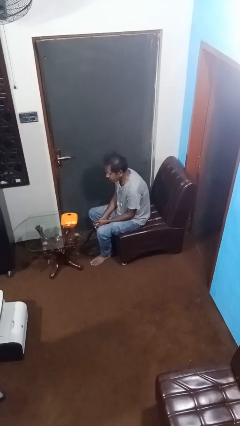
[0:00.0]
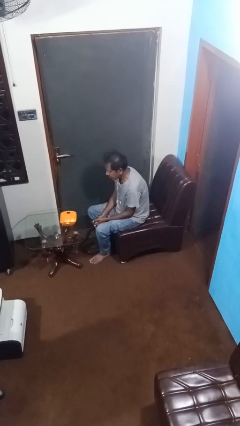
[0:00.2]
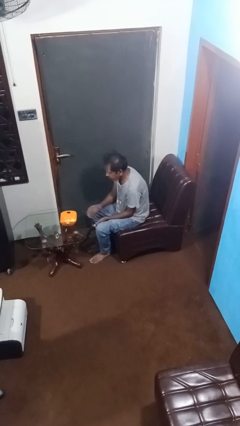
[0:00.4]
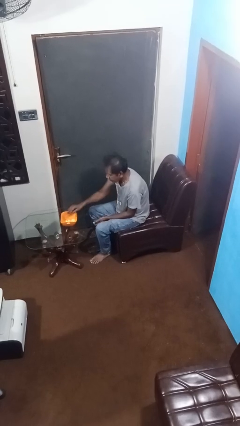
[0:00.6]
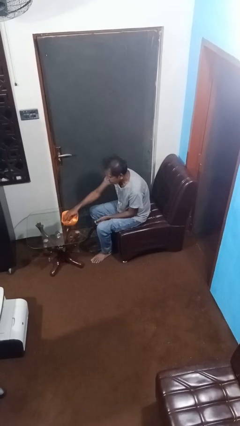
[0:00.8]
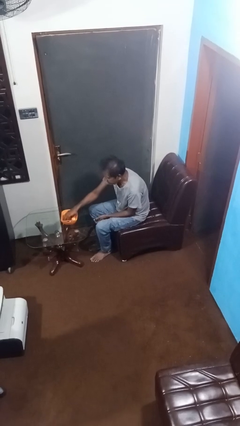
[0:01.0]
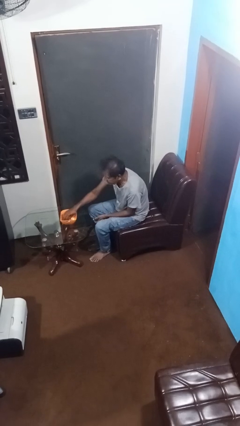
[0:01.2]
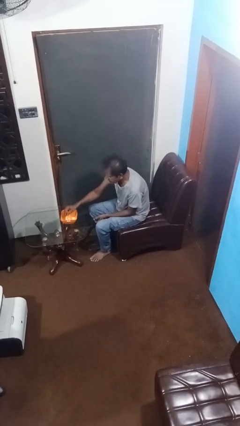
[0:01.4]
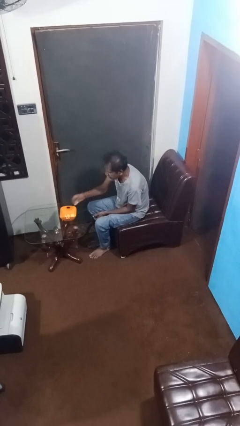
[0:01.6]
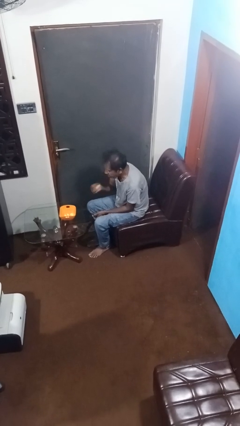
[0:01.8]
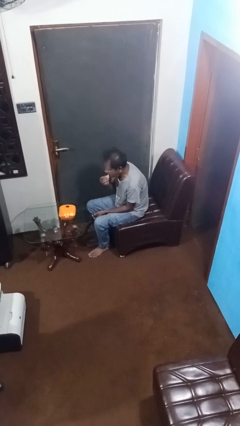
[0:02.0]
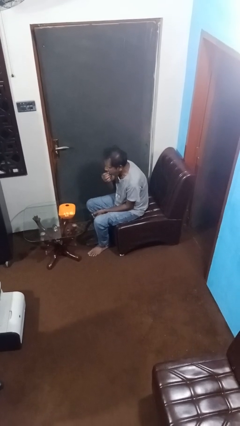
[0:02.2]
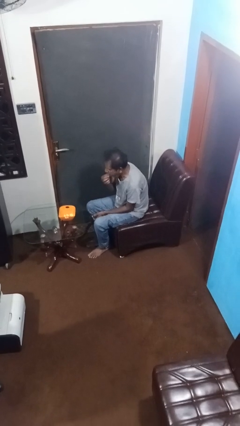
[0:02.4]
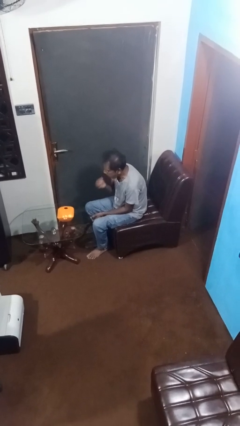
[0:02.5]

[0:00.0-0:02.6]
person eats with hands

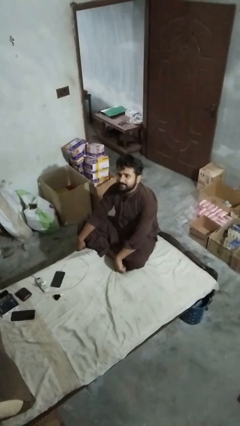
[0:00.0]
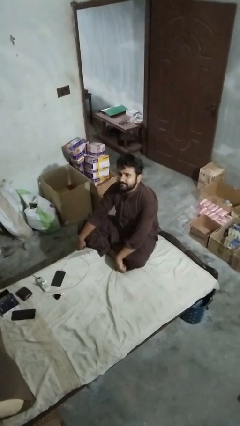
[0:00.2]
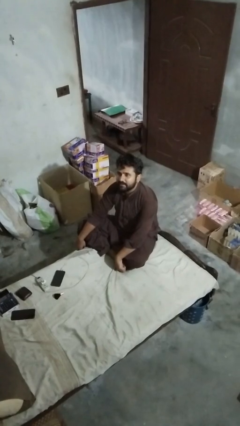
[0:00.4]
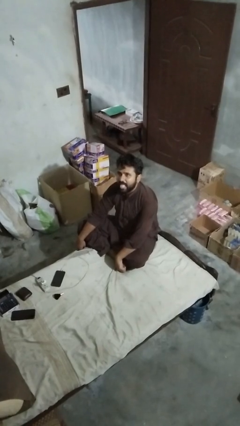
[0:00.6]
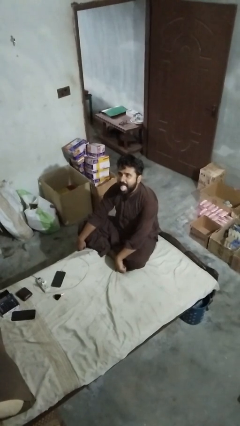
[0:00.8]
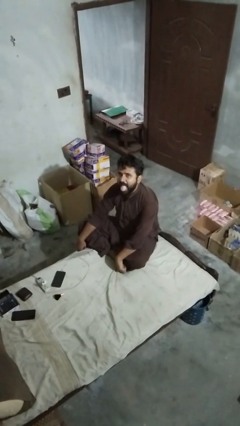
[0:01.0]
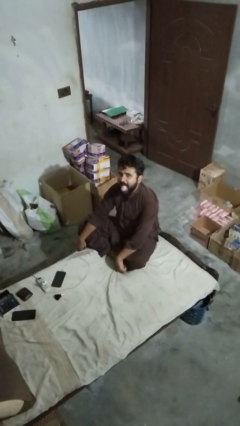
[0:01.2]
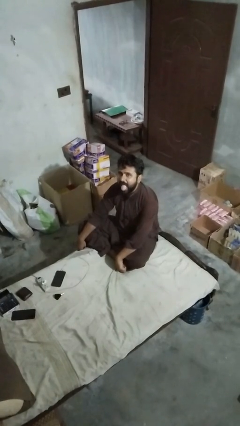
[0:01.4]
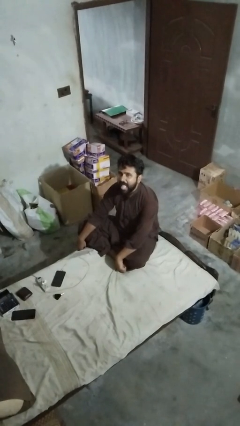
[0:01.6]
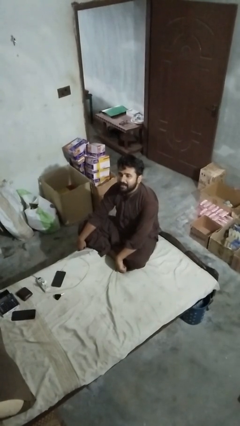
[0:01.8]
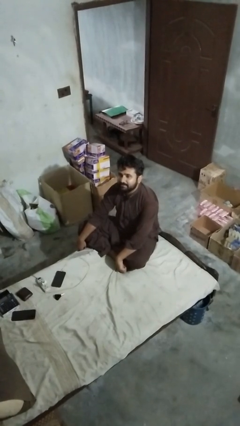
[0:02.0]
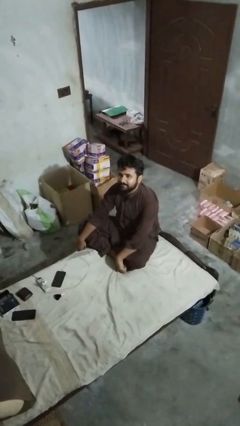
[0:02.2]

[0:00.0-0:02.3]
person sticks out tongue

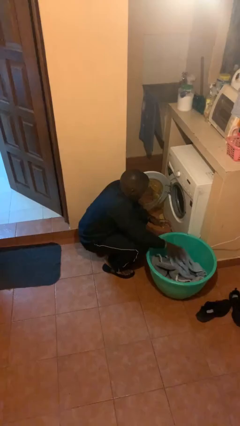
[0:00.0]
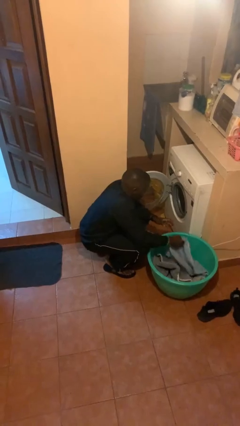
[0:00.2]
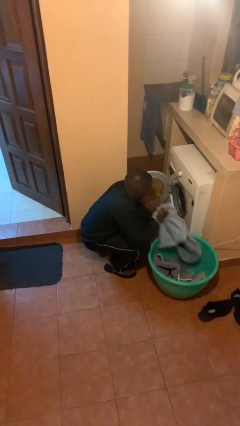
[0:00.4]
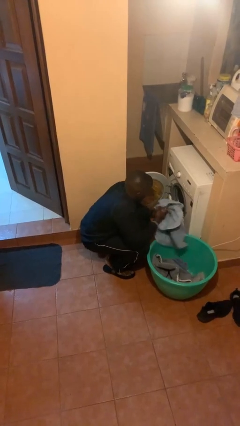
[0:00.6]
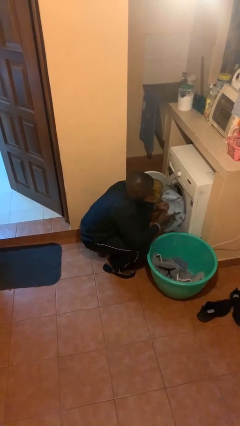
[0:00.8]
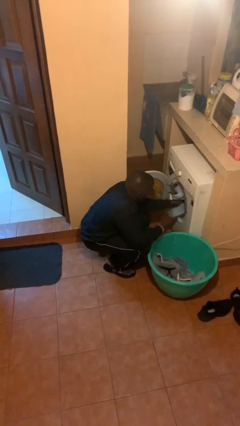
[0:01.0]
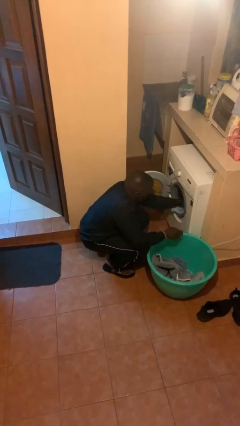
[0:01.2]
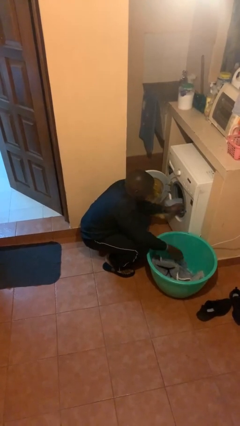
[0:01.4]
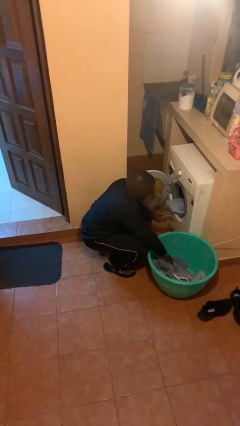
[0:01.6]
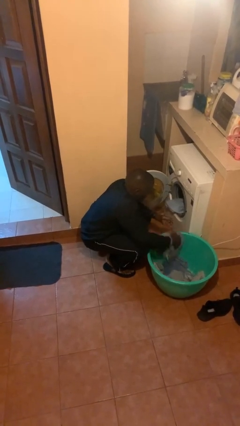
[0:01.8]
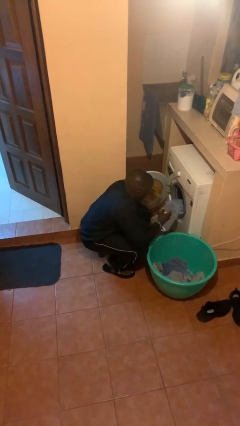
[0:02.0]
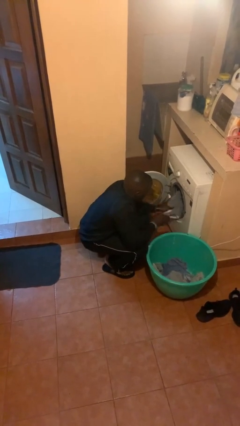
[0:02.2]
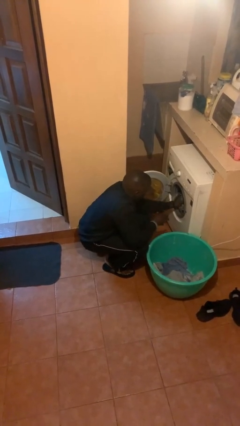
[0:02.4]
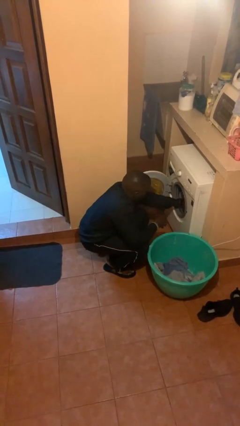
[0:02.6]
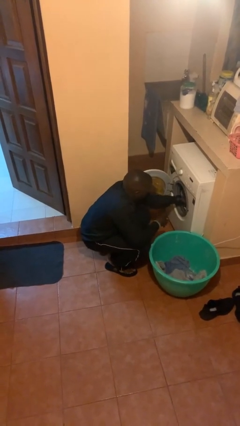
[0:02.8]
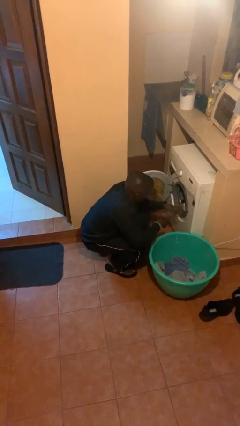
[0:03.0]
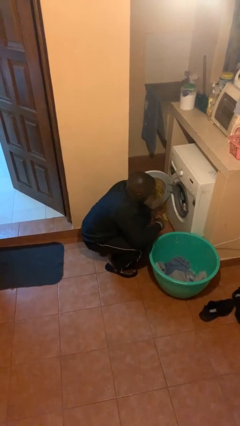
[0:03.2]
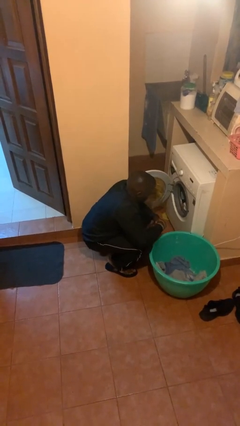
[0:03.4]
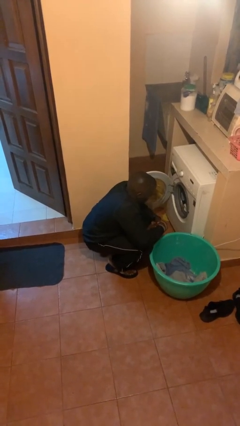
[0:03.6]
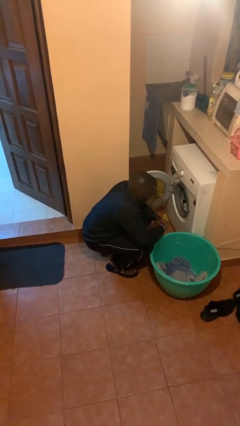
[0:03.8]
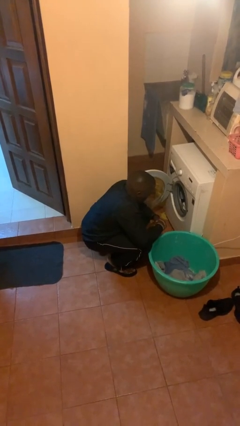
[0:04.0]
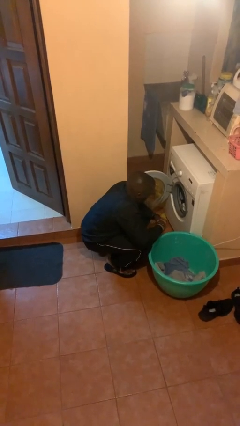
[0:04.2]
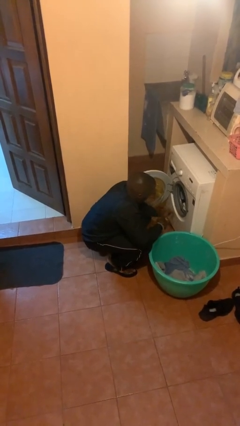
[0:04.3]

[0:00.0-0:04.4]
person loads clotheswasher

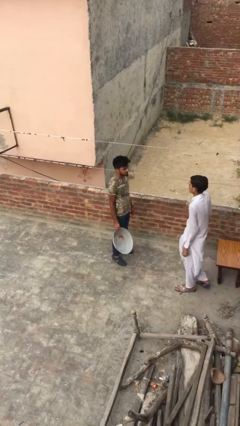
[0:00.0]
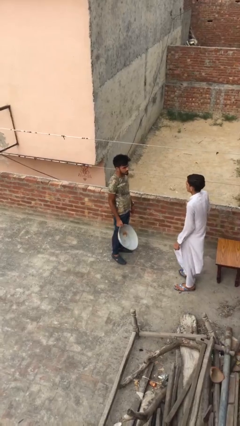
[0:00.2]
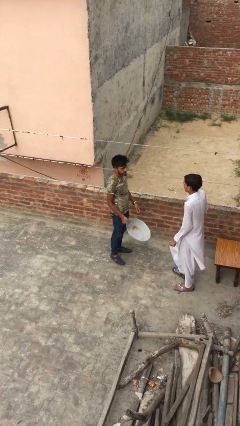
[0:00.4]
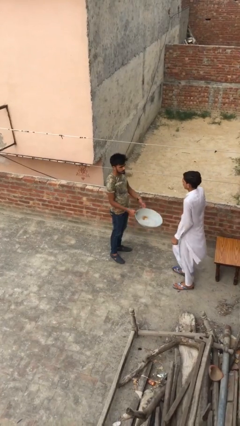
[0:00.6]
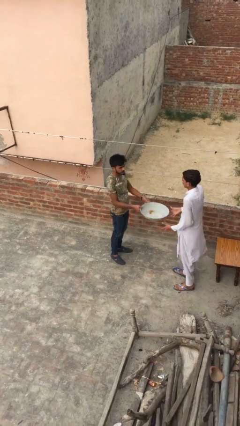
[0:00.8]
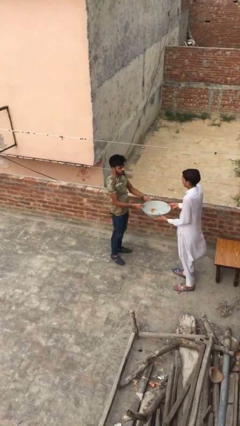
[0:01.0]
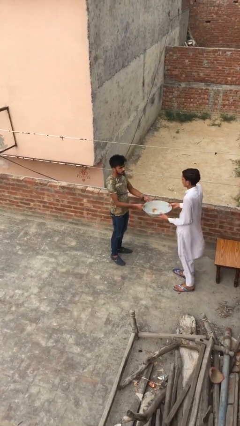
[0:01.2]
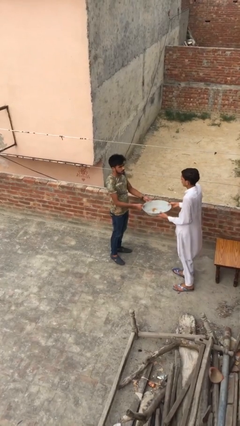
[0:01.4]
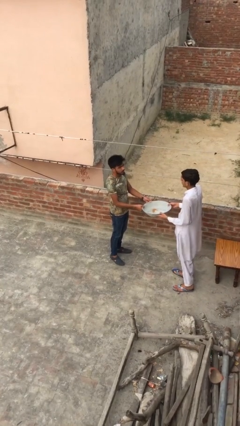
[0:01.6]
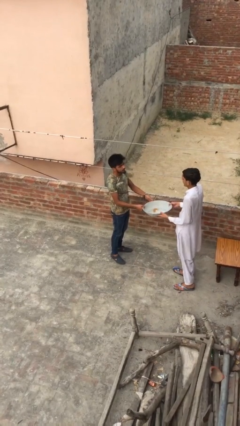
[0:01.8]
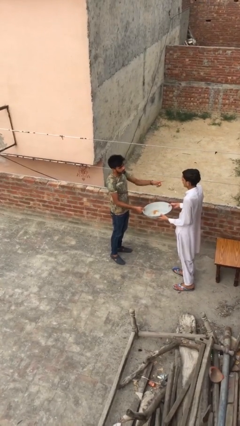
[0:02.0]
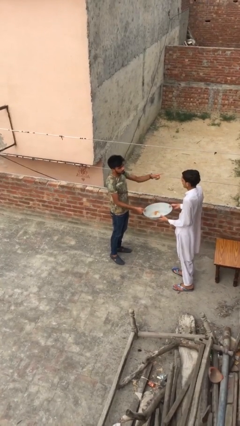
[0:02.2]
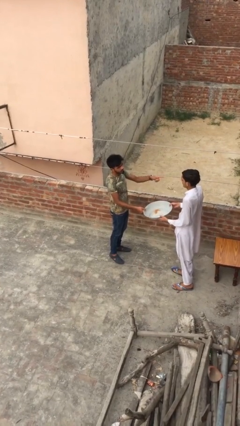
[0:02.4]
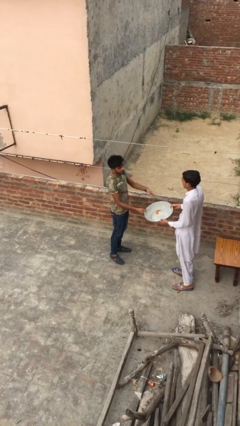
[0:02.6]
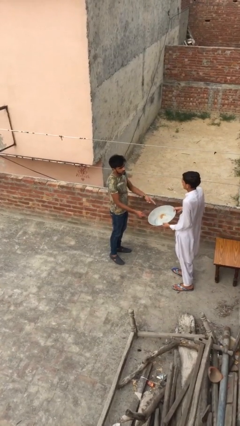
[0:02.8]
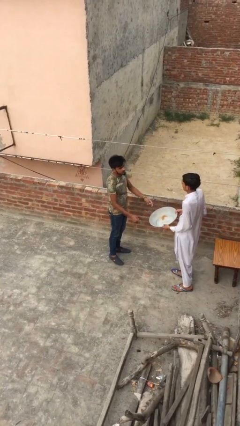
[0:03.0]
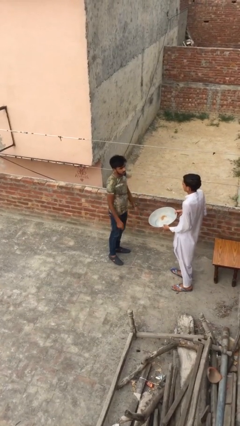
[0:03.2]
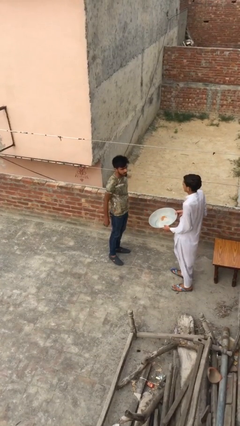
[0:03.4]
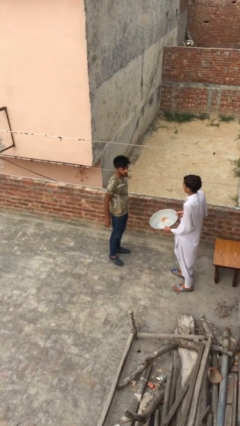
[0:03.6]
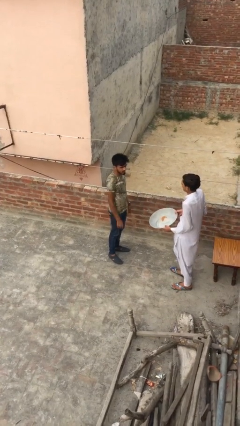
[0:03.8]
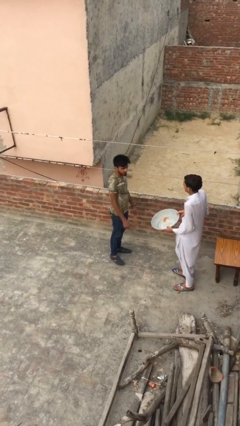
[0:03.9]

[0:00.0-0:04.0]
person transfers object to person

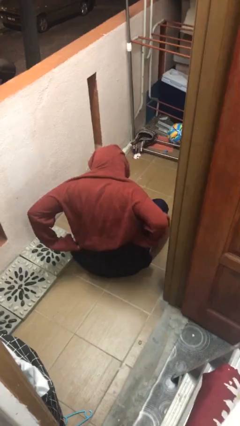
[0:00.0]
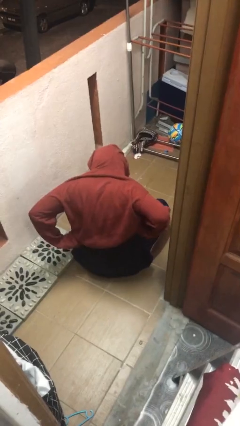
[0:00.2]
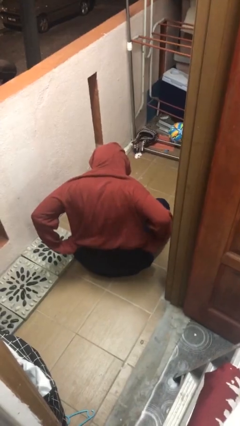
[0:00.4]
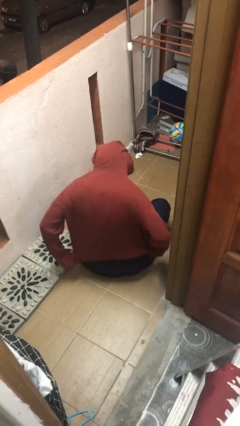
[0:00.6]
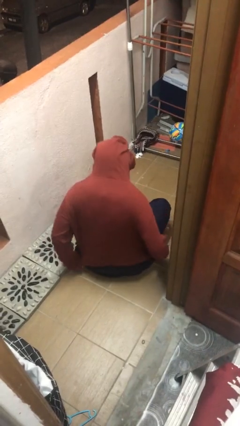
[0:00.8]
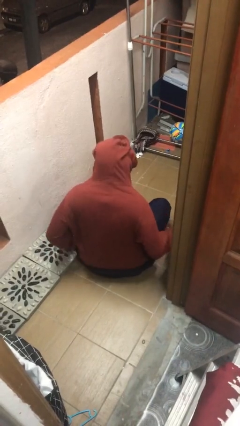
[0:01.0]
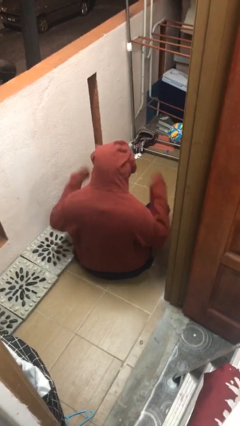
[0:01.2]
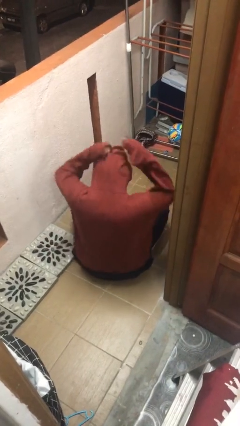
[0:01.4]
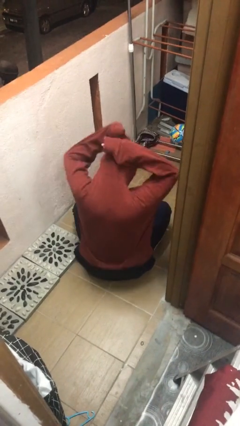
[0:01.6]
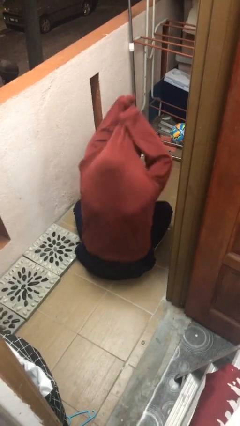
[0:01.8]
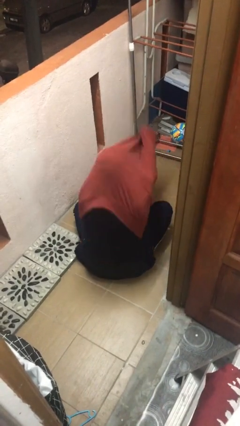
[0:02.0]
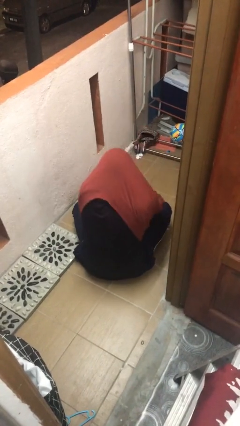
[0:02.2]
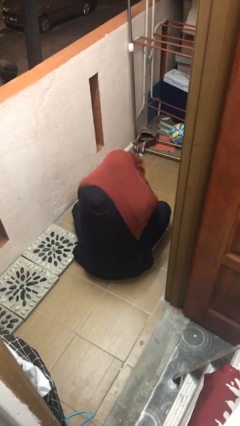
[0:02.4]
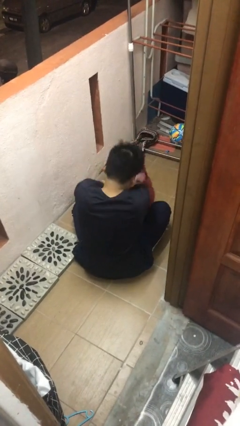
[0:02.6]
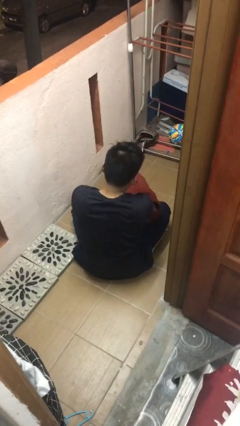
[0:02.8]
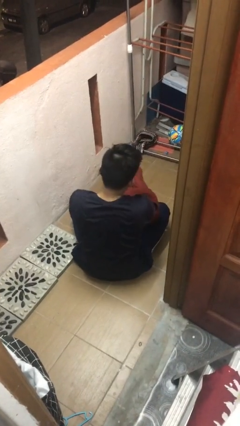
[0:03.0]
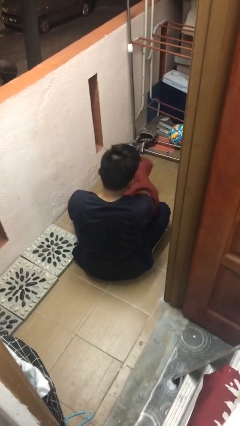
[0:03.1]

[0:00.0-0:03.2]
person takes off hoodie

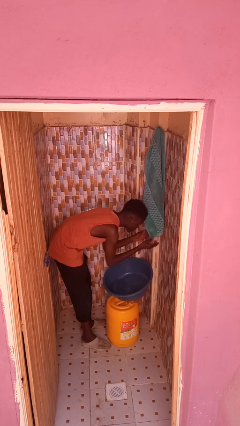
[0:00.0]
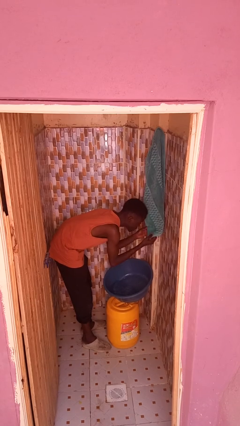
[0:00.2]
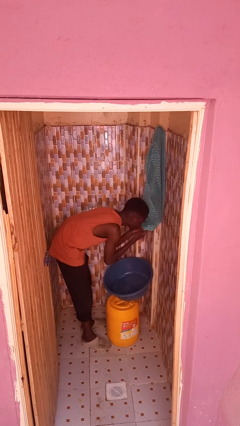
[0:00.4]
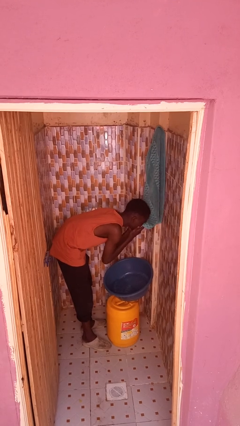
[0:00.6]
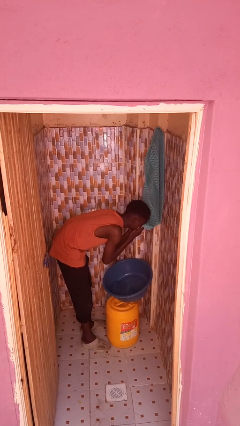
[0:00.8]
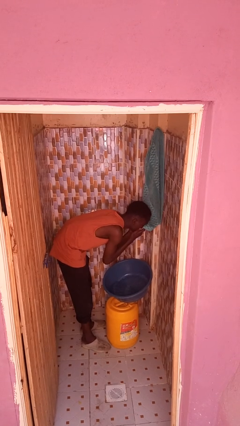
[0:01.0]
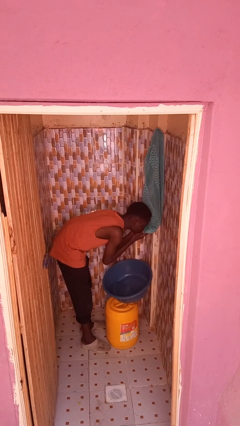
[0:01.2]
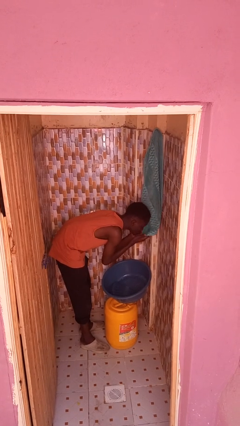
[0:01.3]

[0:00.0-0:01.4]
person dries face with towel

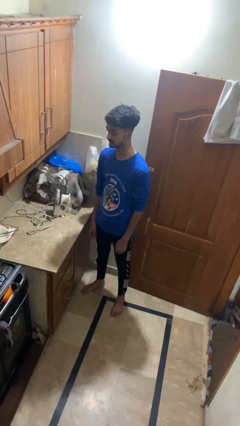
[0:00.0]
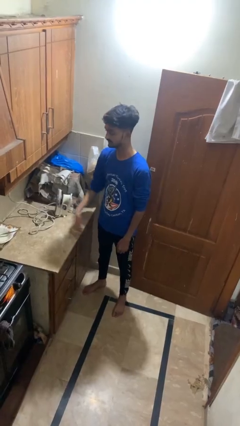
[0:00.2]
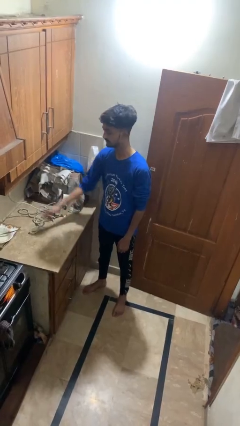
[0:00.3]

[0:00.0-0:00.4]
person unplugs from electrical socket
